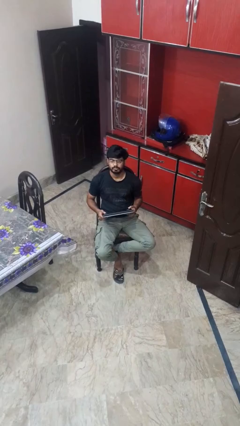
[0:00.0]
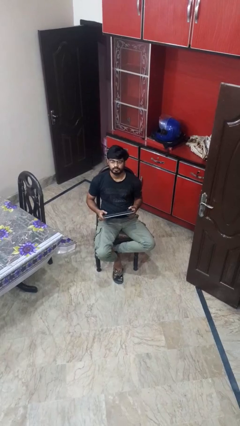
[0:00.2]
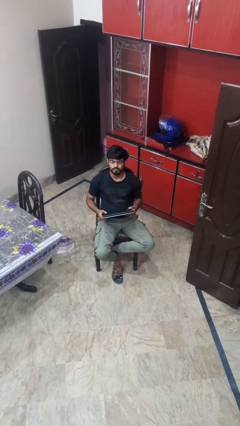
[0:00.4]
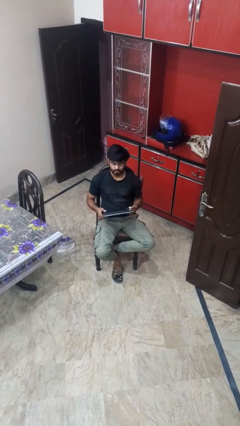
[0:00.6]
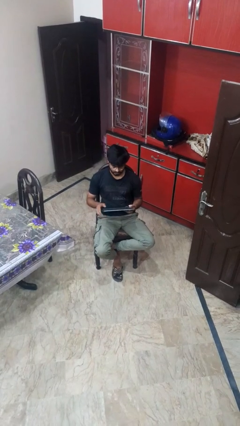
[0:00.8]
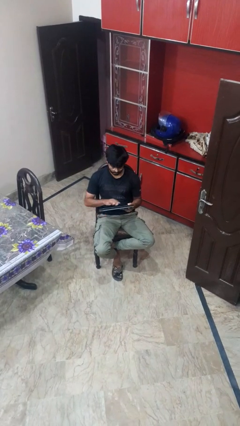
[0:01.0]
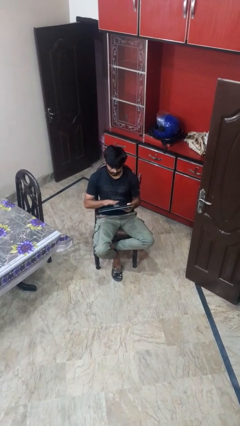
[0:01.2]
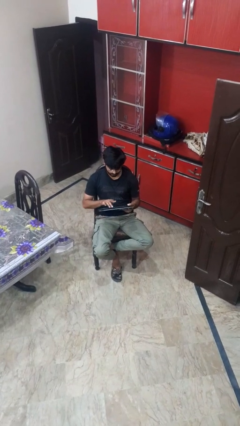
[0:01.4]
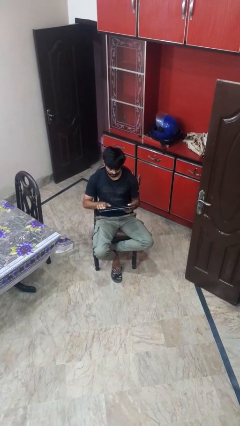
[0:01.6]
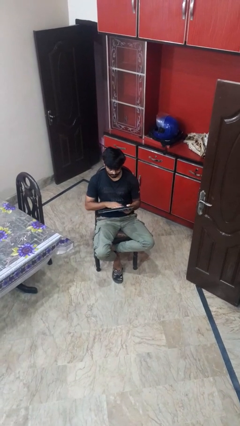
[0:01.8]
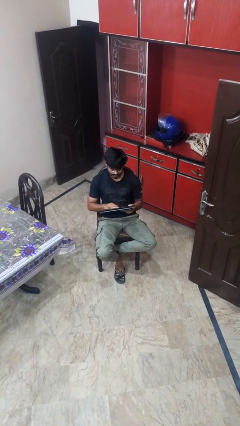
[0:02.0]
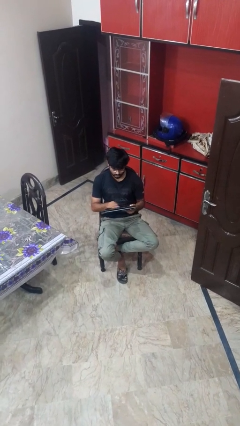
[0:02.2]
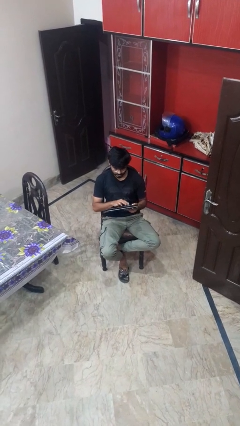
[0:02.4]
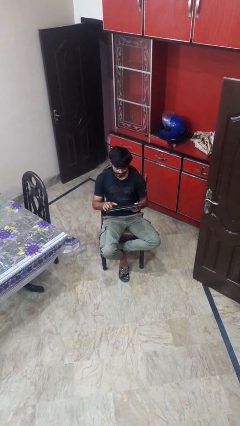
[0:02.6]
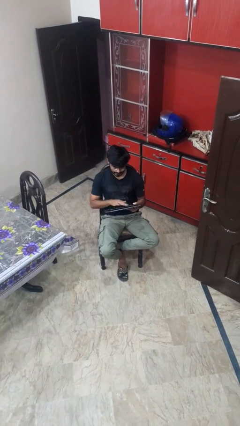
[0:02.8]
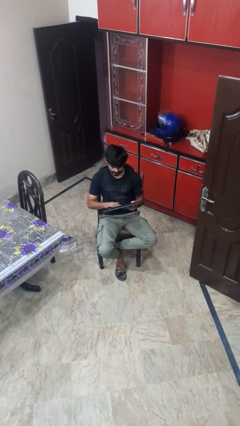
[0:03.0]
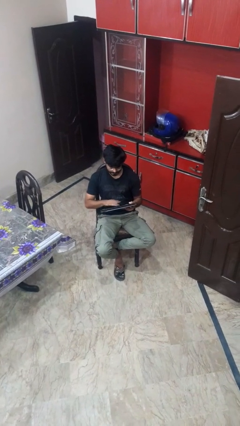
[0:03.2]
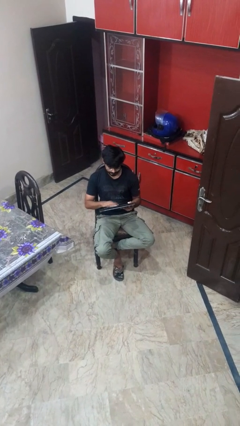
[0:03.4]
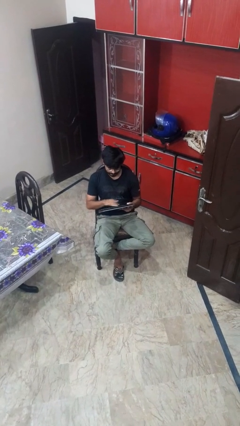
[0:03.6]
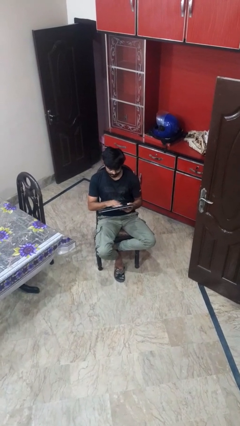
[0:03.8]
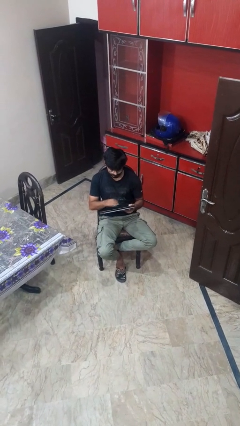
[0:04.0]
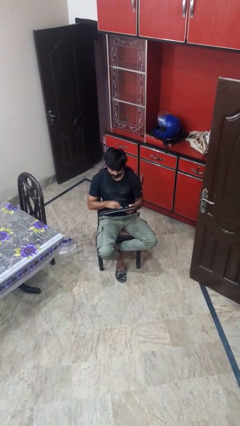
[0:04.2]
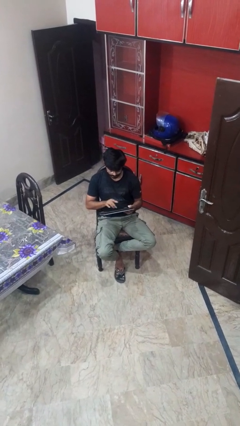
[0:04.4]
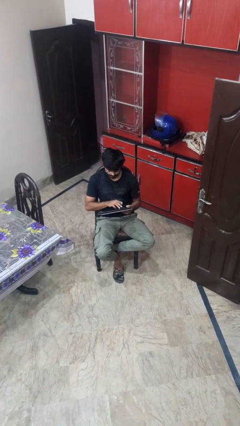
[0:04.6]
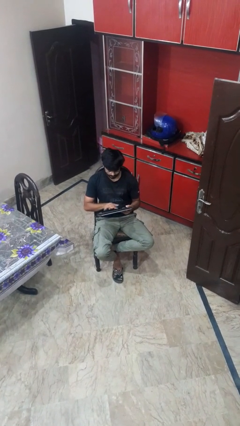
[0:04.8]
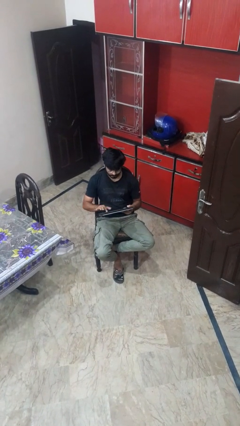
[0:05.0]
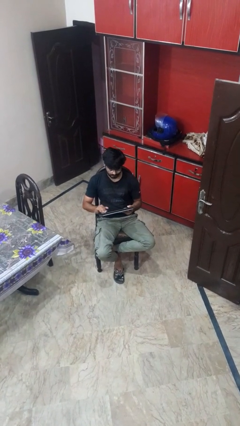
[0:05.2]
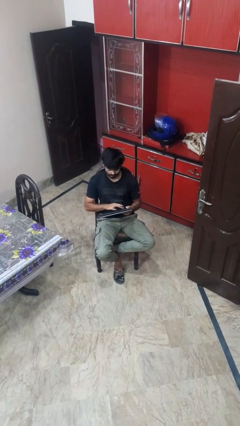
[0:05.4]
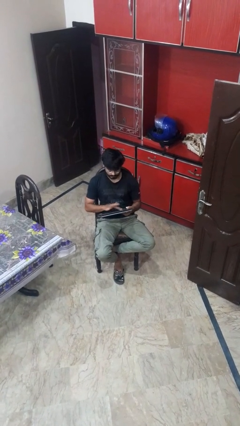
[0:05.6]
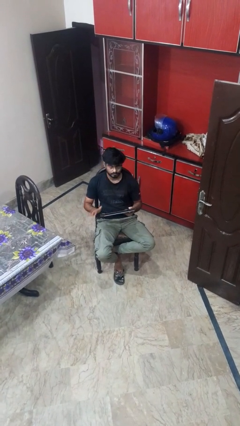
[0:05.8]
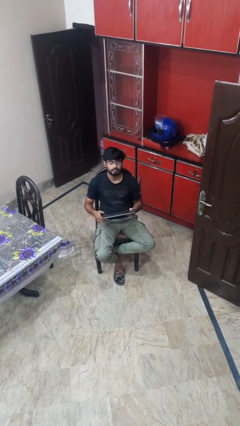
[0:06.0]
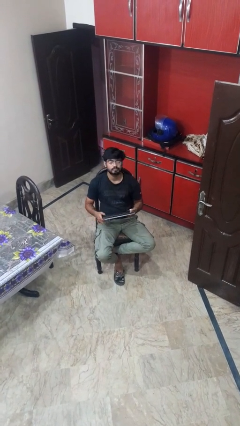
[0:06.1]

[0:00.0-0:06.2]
person interacts with tablet

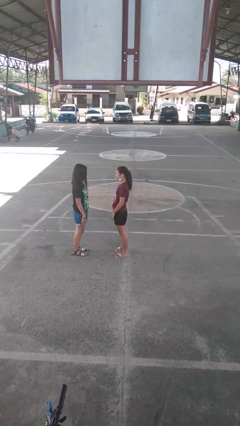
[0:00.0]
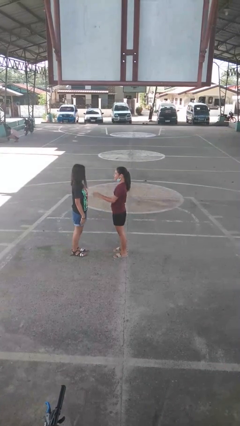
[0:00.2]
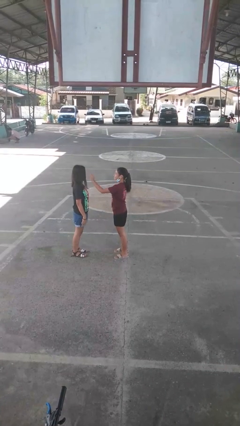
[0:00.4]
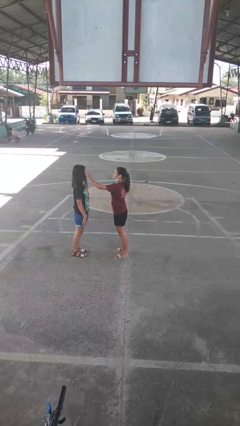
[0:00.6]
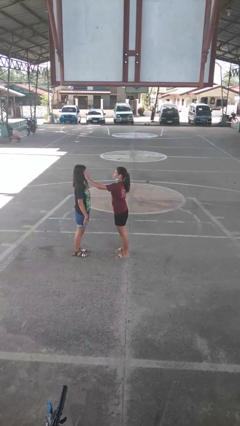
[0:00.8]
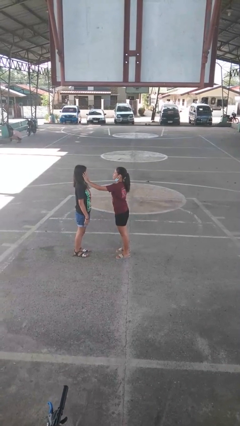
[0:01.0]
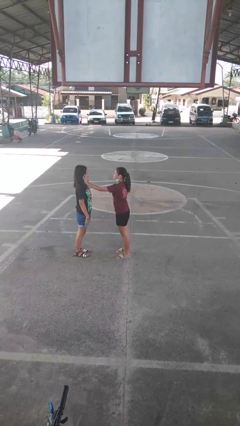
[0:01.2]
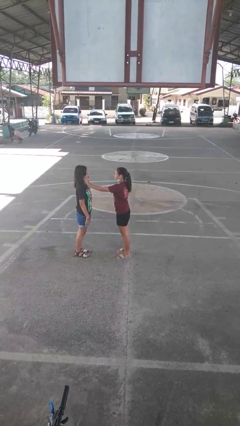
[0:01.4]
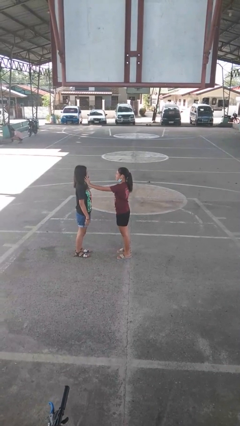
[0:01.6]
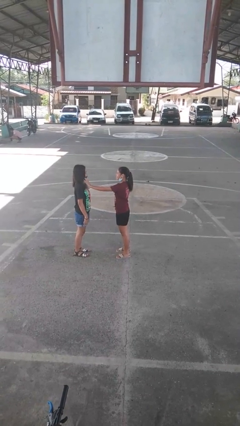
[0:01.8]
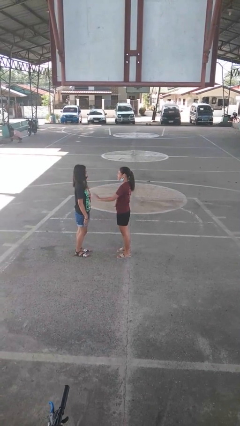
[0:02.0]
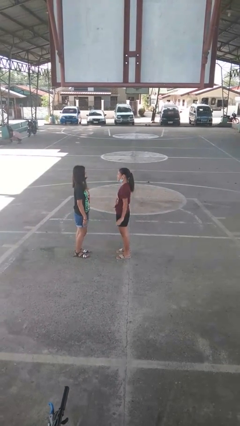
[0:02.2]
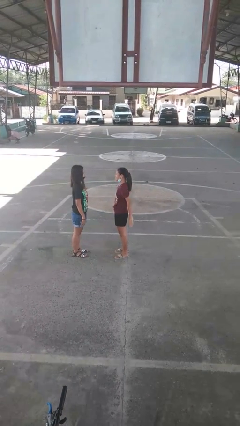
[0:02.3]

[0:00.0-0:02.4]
person touches face of person

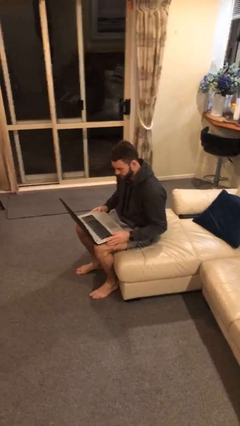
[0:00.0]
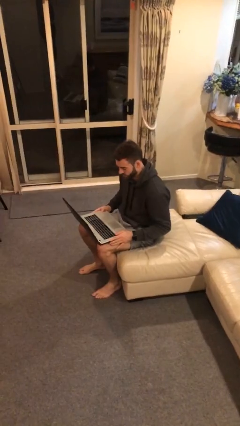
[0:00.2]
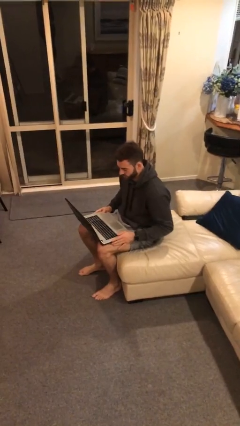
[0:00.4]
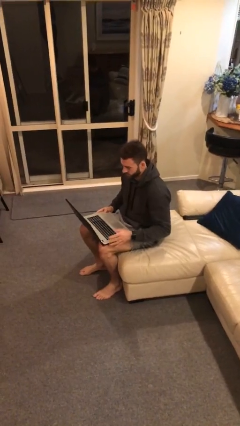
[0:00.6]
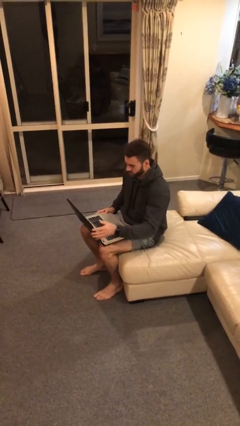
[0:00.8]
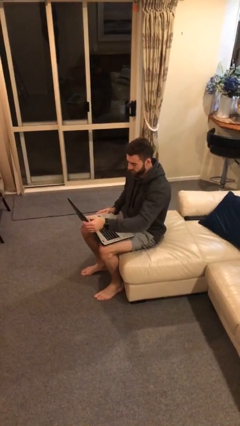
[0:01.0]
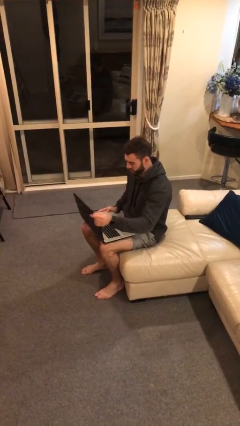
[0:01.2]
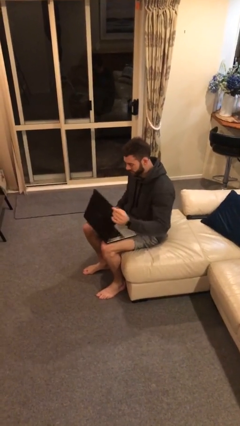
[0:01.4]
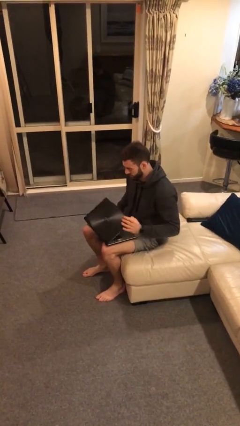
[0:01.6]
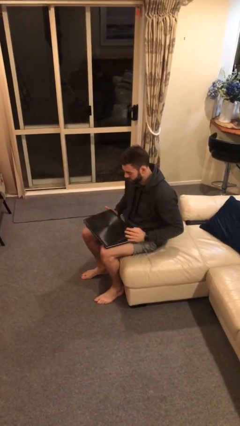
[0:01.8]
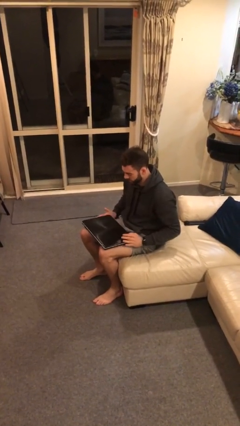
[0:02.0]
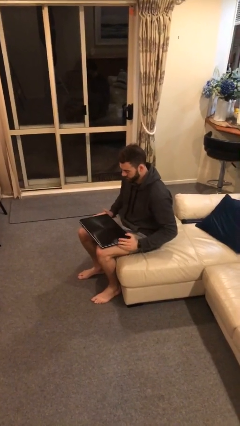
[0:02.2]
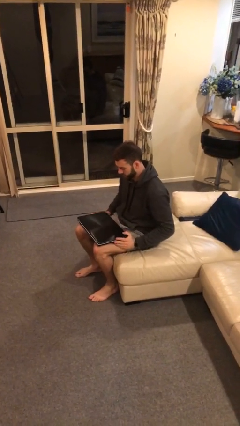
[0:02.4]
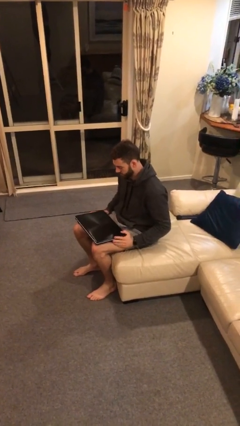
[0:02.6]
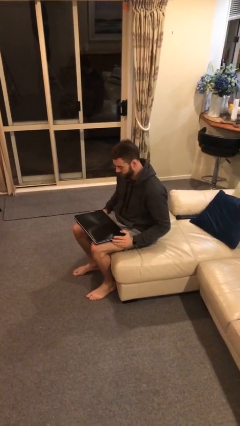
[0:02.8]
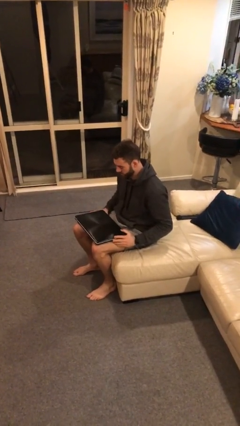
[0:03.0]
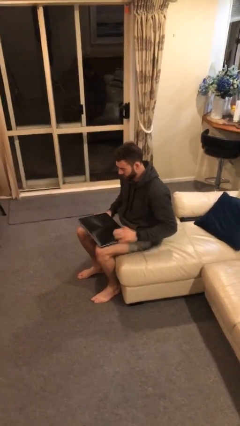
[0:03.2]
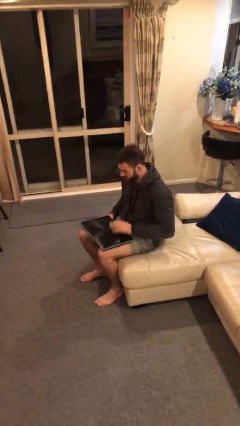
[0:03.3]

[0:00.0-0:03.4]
person closes laptop

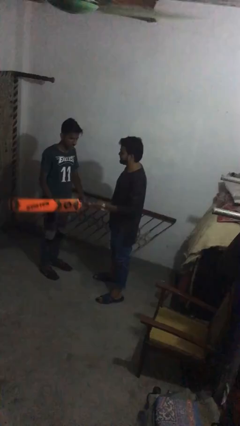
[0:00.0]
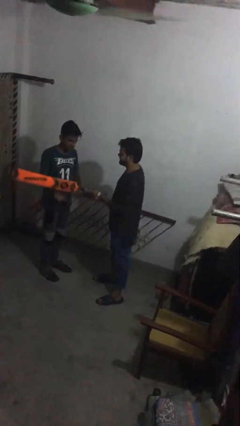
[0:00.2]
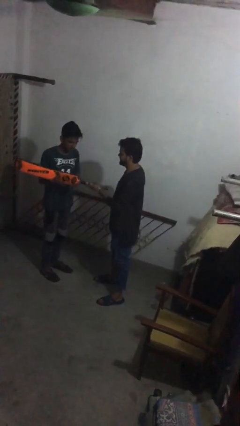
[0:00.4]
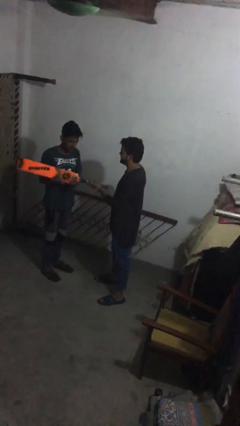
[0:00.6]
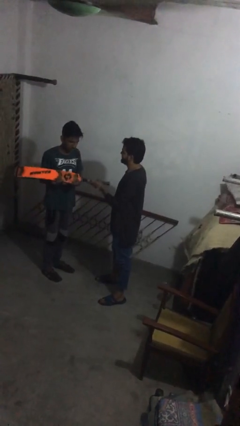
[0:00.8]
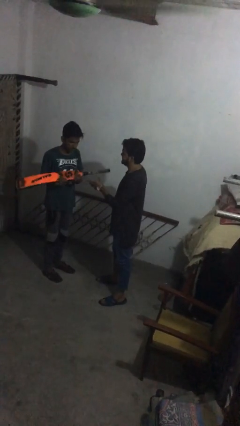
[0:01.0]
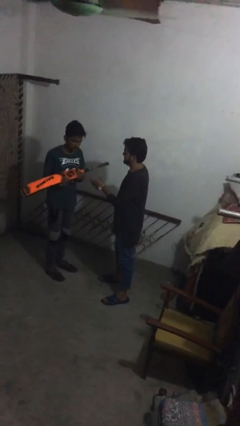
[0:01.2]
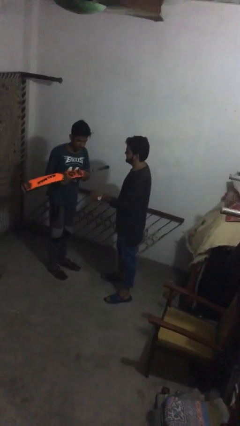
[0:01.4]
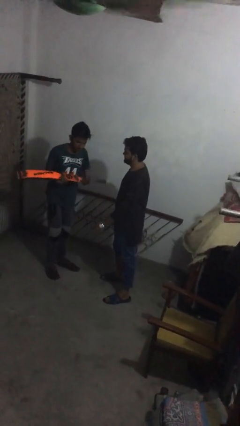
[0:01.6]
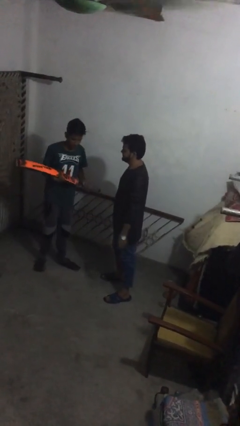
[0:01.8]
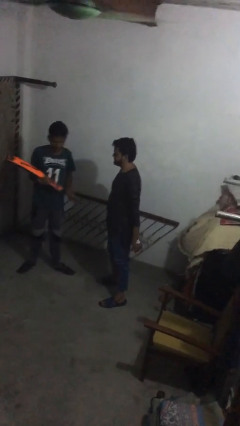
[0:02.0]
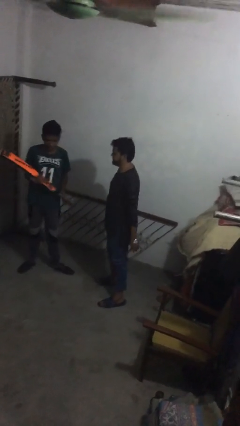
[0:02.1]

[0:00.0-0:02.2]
person transfers object to person

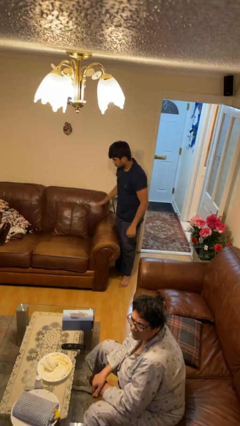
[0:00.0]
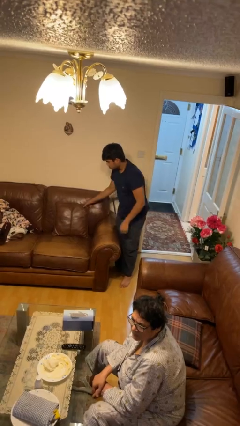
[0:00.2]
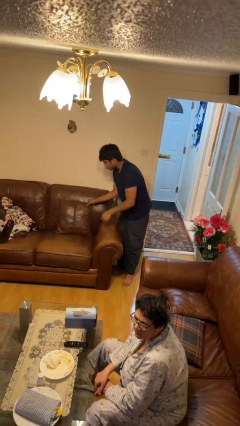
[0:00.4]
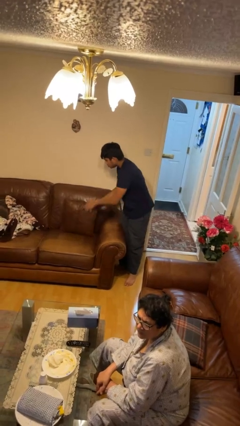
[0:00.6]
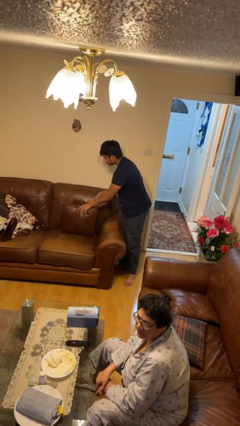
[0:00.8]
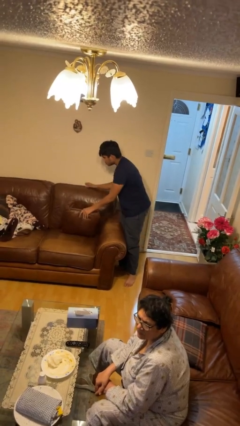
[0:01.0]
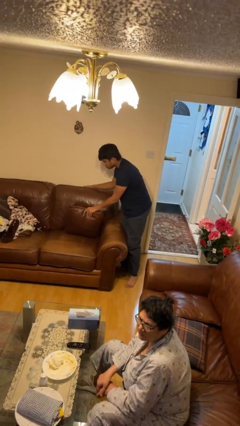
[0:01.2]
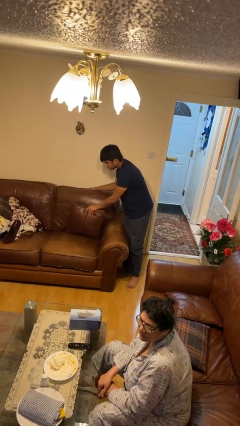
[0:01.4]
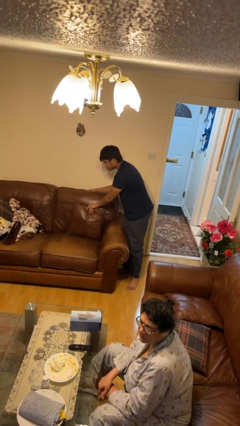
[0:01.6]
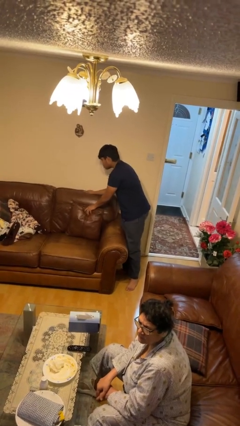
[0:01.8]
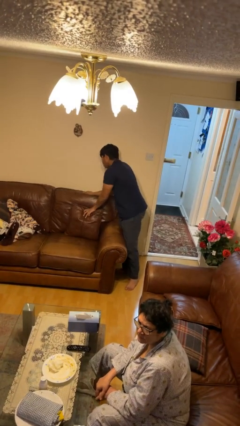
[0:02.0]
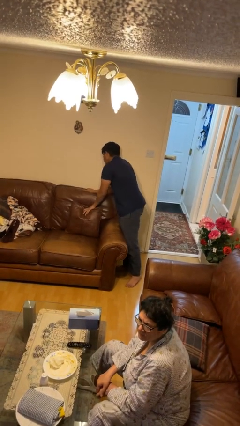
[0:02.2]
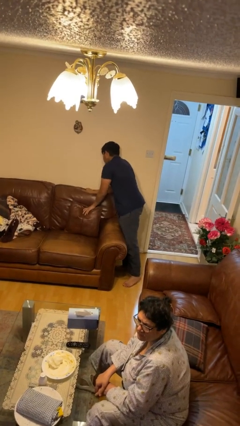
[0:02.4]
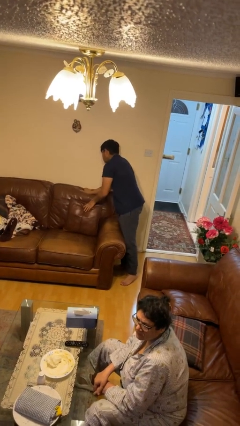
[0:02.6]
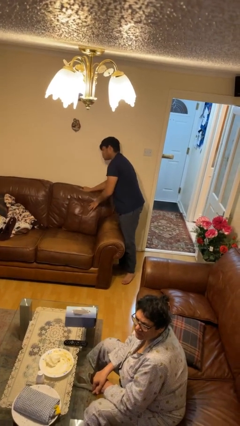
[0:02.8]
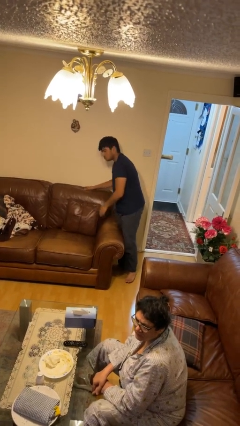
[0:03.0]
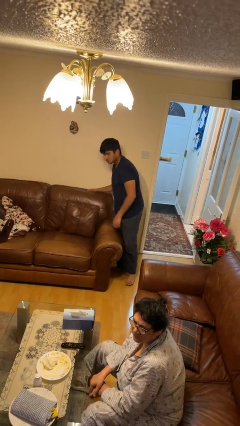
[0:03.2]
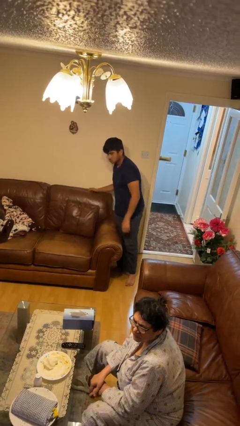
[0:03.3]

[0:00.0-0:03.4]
person searches in couch

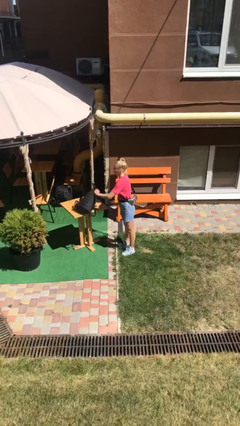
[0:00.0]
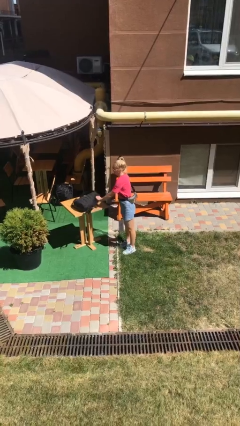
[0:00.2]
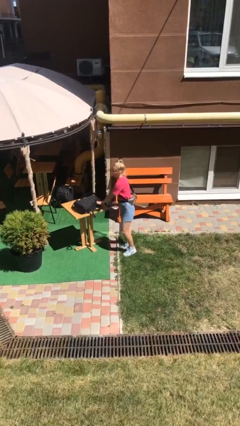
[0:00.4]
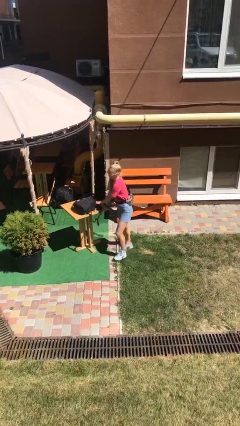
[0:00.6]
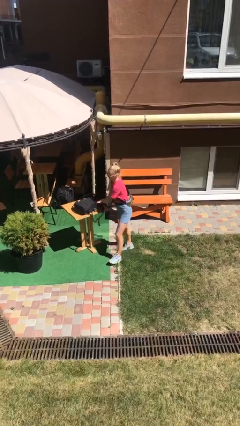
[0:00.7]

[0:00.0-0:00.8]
person puts down object on table
